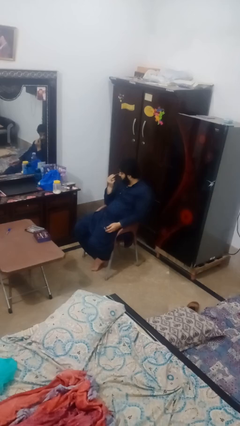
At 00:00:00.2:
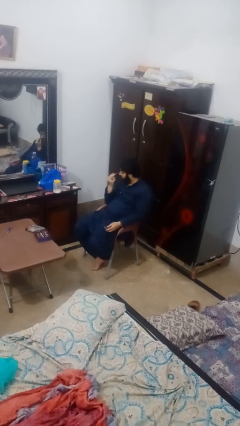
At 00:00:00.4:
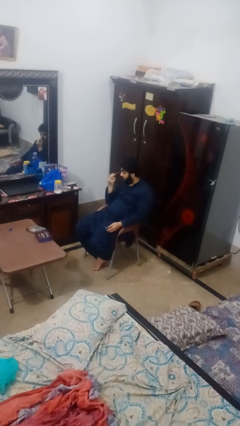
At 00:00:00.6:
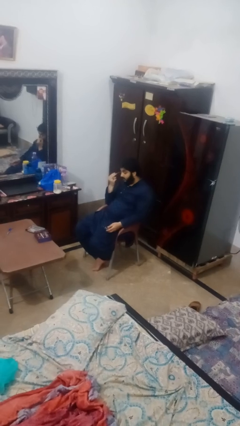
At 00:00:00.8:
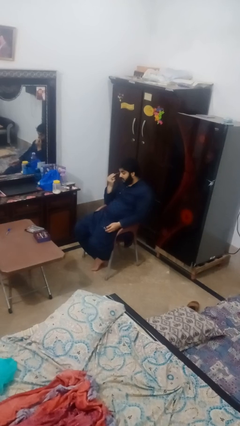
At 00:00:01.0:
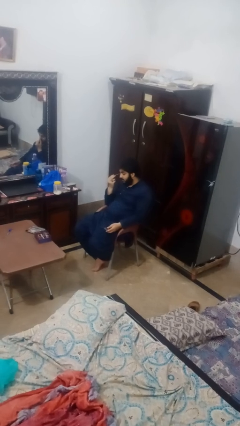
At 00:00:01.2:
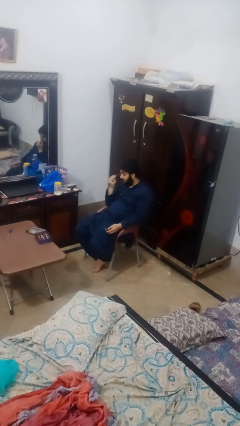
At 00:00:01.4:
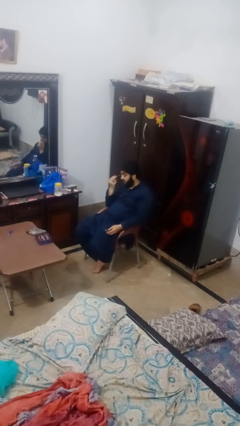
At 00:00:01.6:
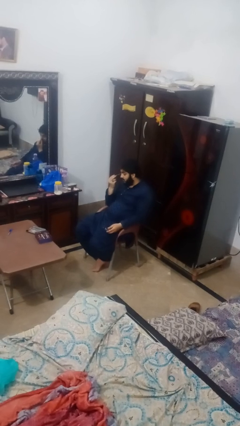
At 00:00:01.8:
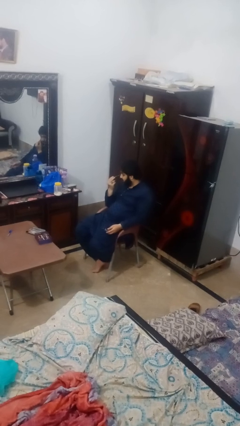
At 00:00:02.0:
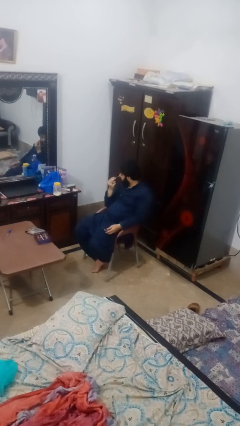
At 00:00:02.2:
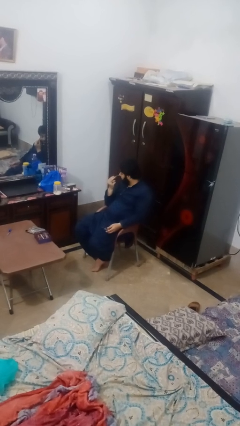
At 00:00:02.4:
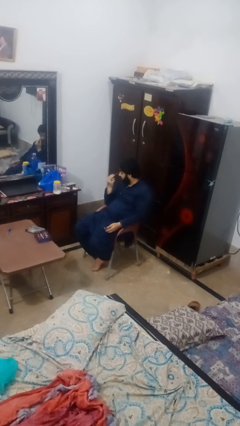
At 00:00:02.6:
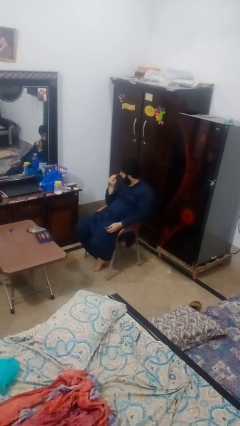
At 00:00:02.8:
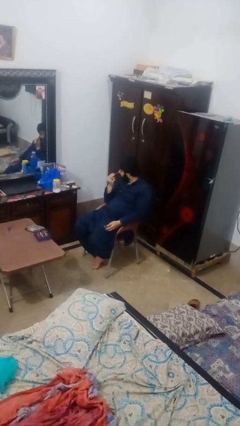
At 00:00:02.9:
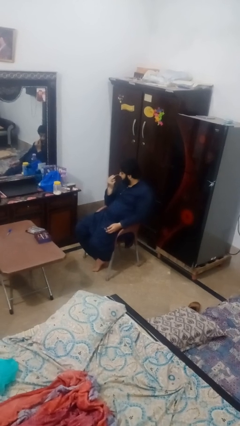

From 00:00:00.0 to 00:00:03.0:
person applies eye makeup

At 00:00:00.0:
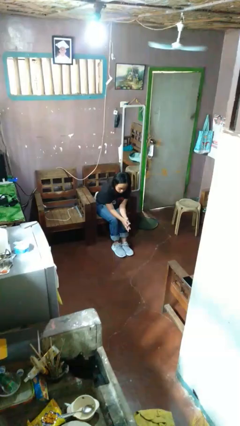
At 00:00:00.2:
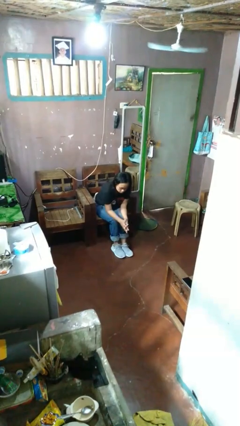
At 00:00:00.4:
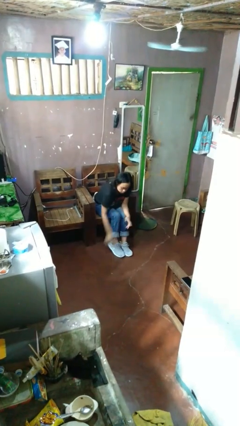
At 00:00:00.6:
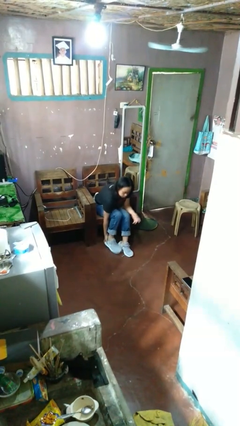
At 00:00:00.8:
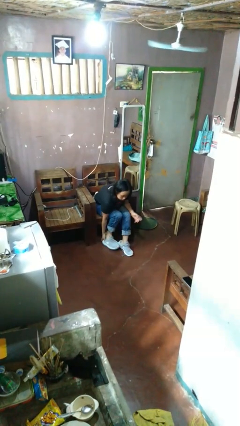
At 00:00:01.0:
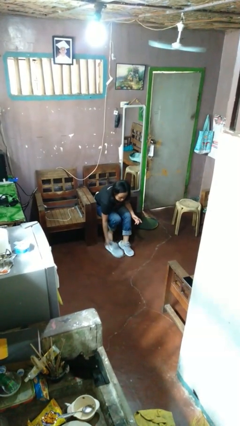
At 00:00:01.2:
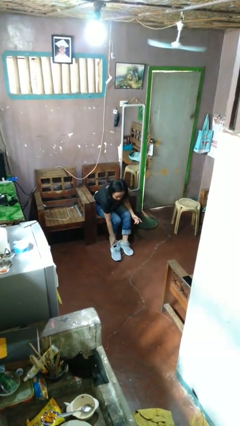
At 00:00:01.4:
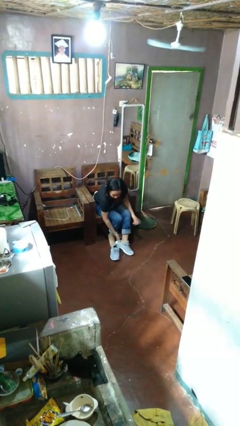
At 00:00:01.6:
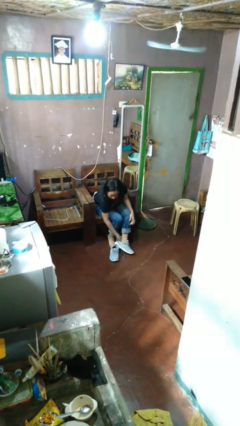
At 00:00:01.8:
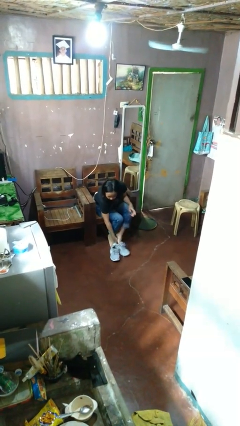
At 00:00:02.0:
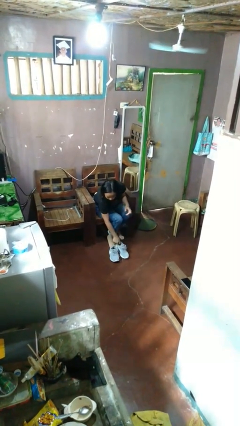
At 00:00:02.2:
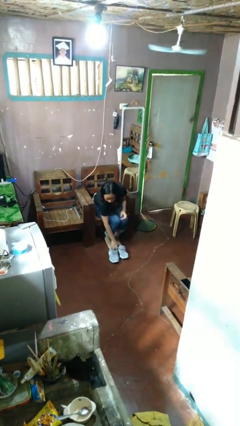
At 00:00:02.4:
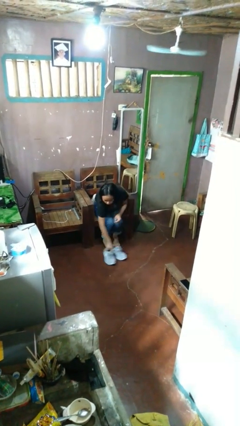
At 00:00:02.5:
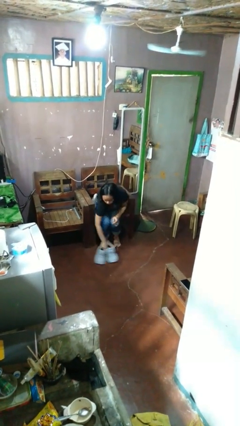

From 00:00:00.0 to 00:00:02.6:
person takes off shoes

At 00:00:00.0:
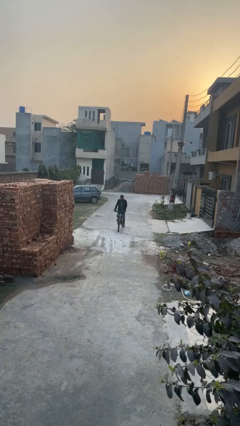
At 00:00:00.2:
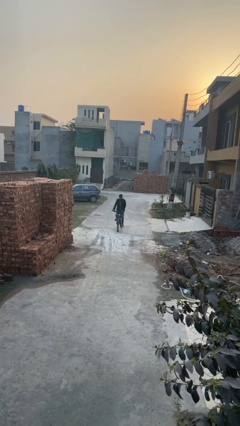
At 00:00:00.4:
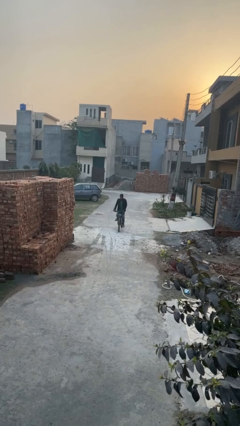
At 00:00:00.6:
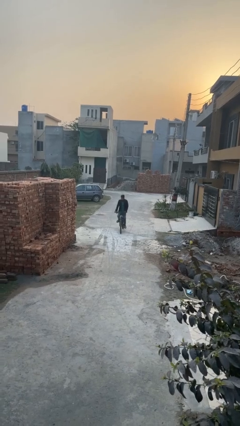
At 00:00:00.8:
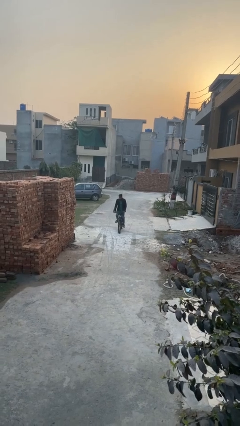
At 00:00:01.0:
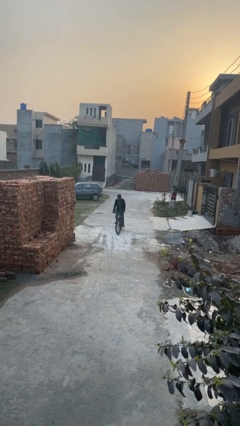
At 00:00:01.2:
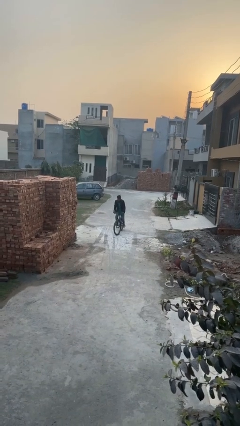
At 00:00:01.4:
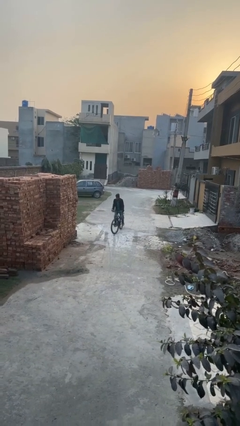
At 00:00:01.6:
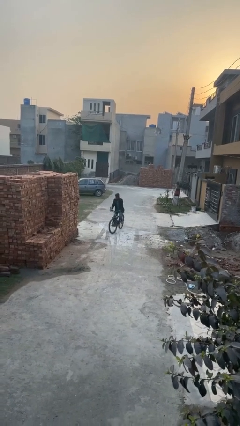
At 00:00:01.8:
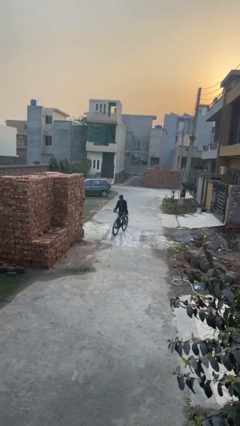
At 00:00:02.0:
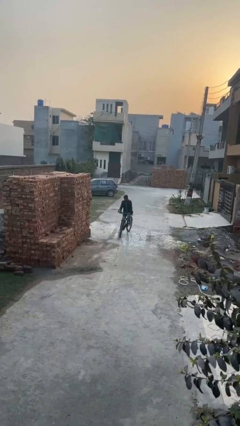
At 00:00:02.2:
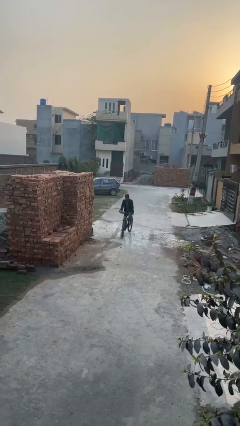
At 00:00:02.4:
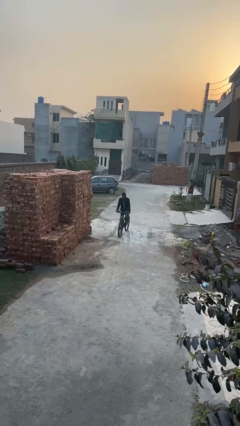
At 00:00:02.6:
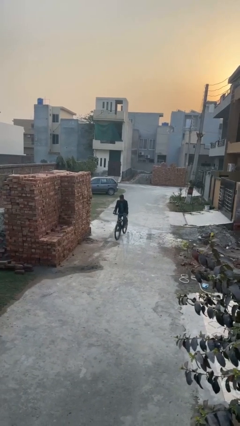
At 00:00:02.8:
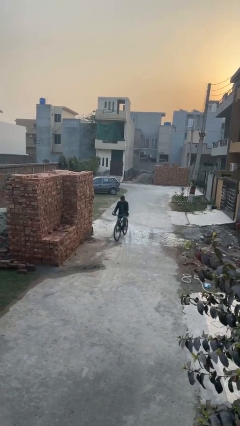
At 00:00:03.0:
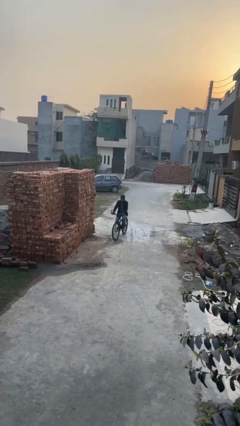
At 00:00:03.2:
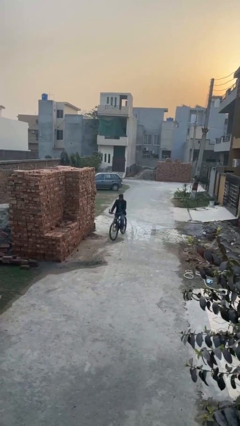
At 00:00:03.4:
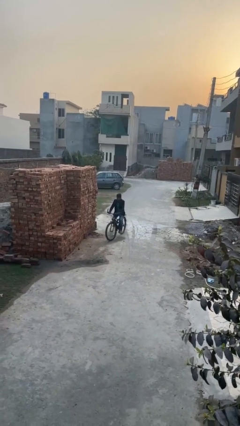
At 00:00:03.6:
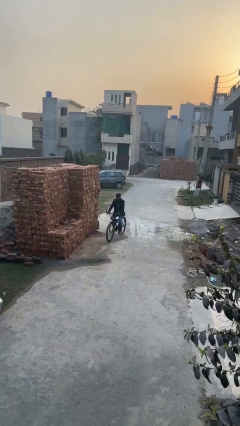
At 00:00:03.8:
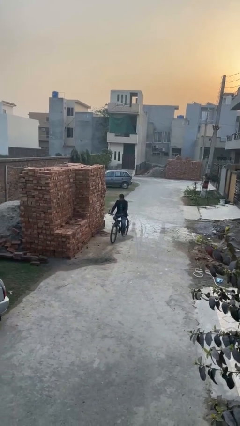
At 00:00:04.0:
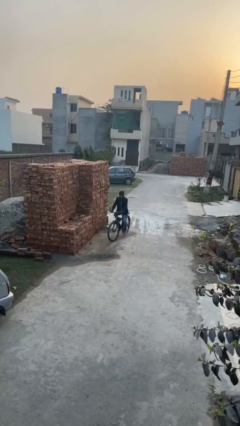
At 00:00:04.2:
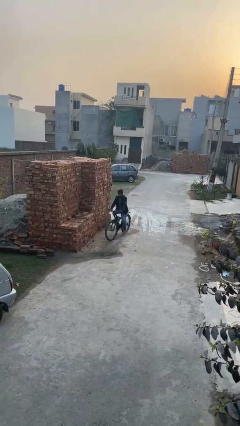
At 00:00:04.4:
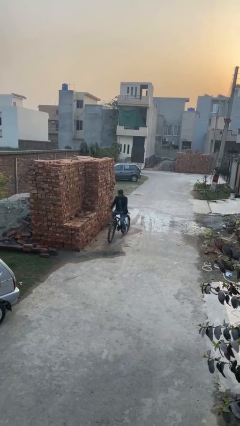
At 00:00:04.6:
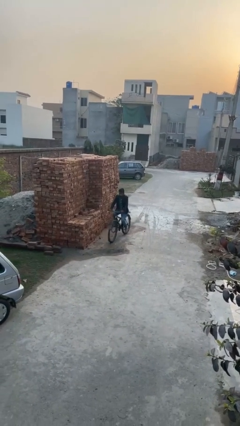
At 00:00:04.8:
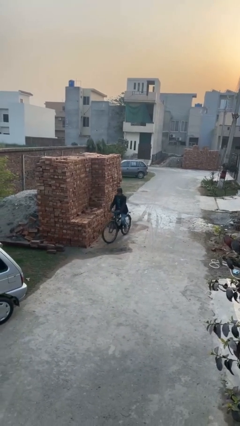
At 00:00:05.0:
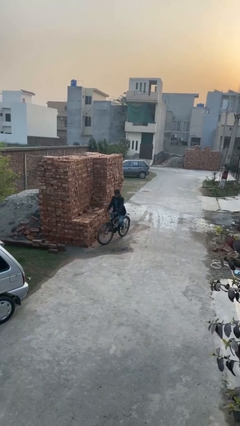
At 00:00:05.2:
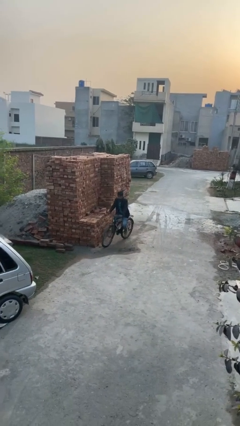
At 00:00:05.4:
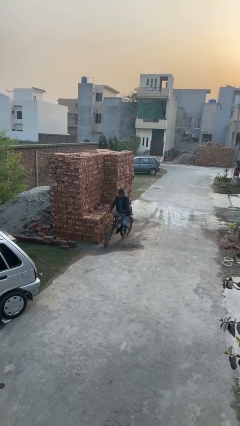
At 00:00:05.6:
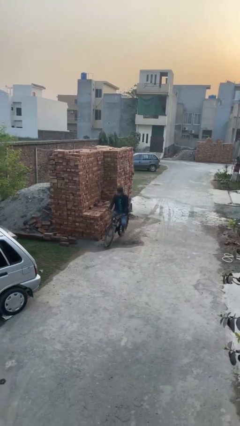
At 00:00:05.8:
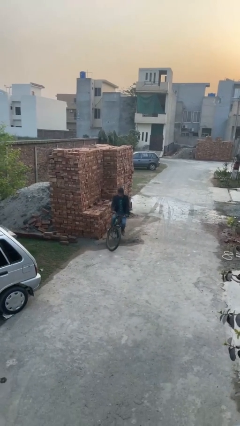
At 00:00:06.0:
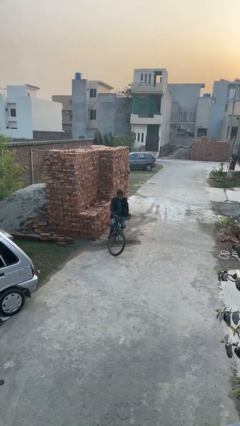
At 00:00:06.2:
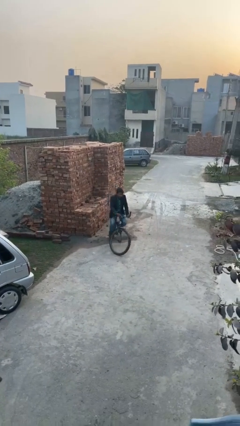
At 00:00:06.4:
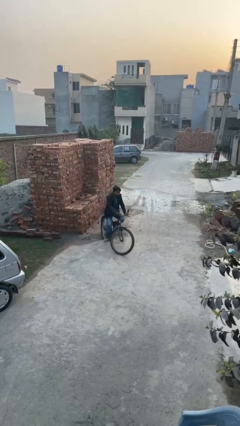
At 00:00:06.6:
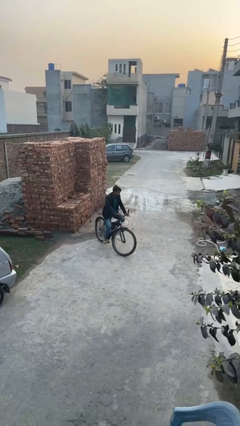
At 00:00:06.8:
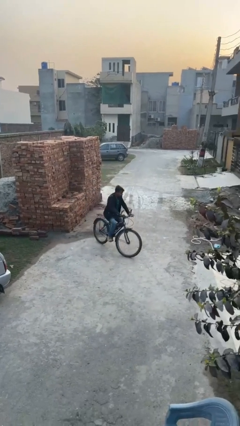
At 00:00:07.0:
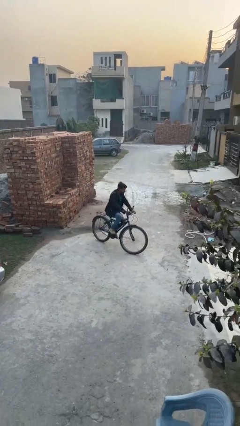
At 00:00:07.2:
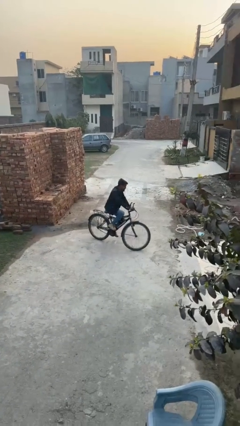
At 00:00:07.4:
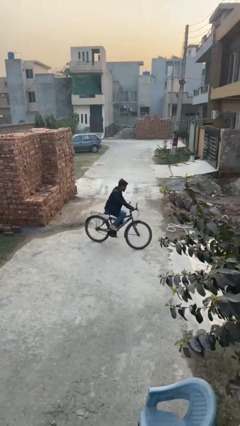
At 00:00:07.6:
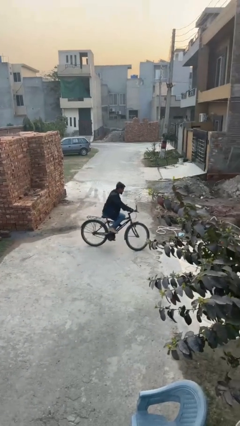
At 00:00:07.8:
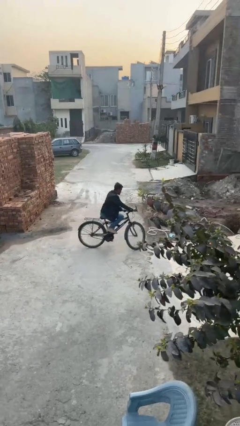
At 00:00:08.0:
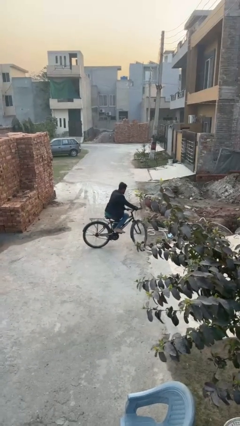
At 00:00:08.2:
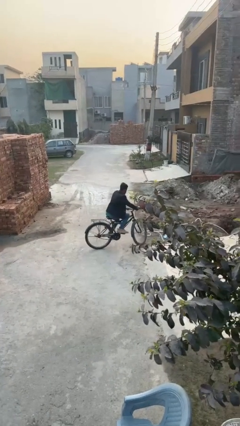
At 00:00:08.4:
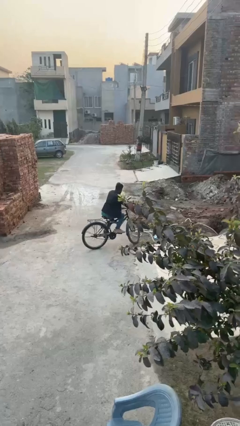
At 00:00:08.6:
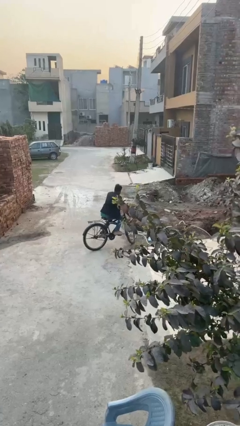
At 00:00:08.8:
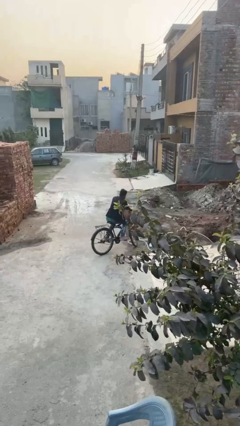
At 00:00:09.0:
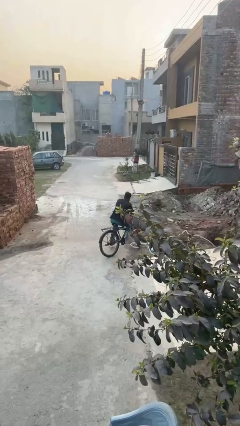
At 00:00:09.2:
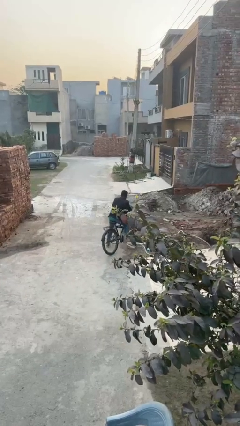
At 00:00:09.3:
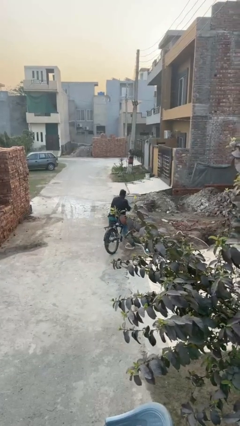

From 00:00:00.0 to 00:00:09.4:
person rides bicycle

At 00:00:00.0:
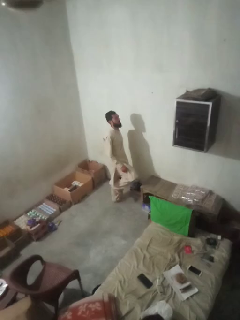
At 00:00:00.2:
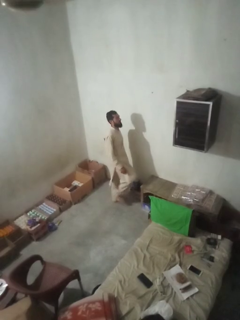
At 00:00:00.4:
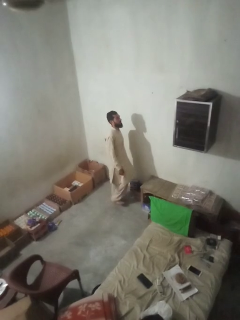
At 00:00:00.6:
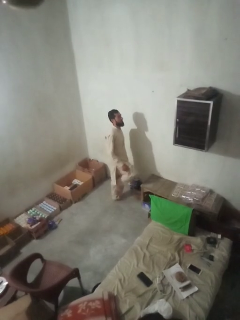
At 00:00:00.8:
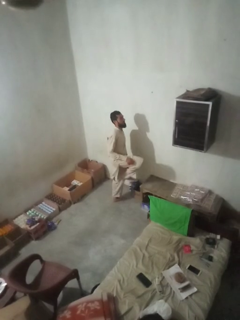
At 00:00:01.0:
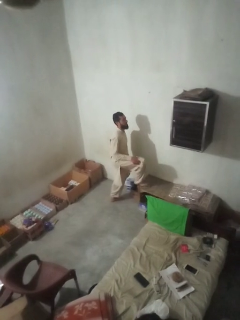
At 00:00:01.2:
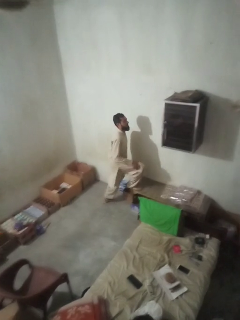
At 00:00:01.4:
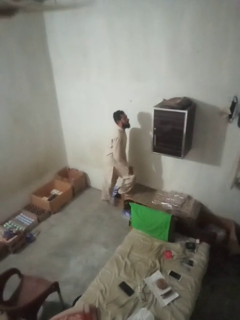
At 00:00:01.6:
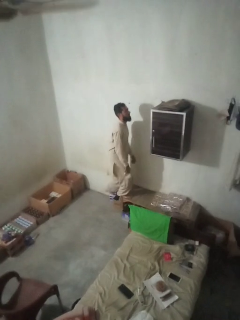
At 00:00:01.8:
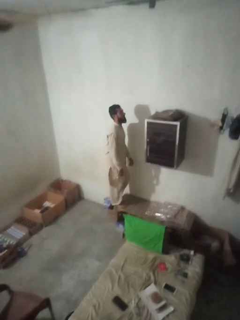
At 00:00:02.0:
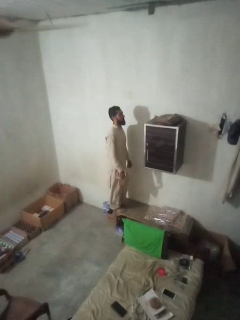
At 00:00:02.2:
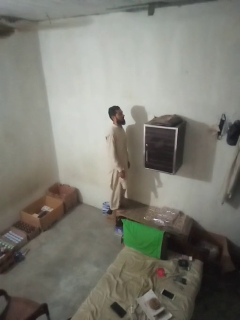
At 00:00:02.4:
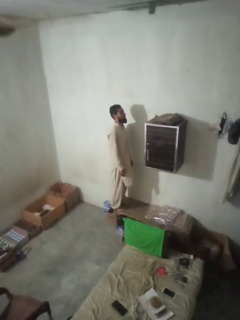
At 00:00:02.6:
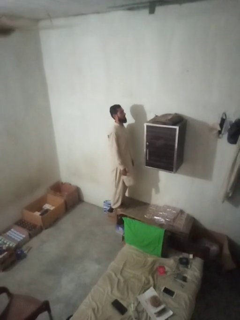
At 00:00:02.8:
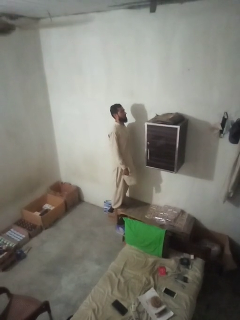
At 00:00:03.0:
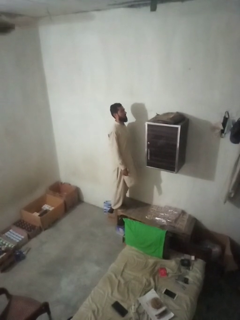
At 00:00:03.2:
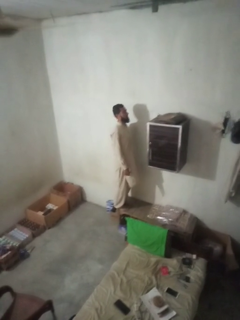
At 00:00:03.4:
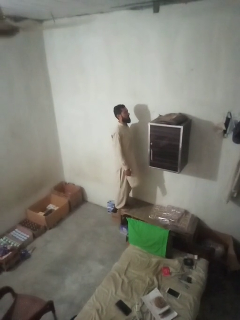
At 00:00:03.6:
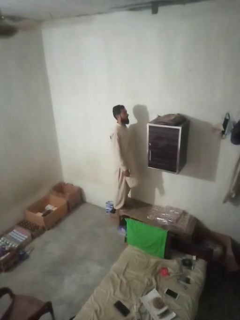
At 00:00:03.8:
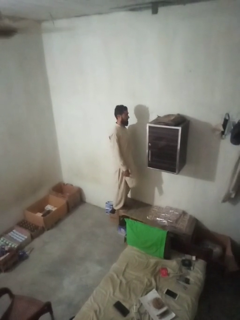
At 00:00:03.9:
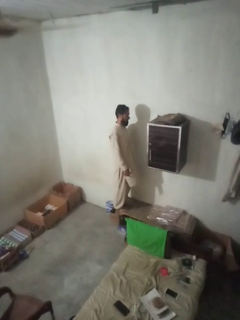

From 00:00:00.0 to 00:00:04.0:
person climbs on table
